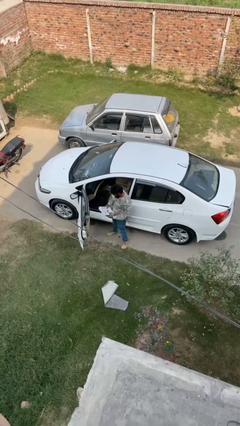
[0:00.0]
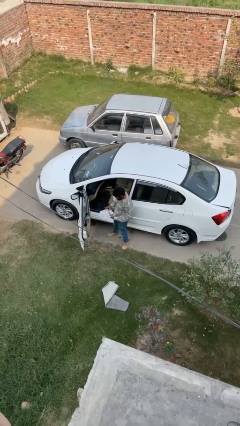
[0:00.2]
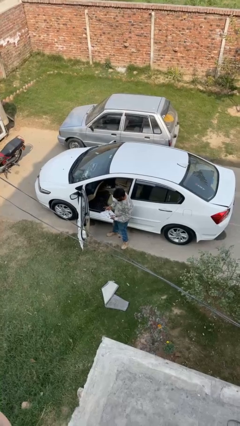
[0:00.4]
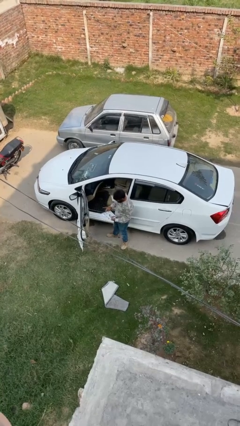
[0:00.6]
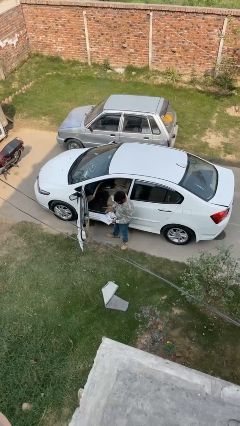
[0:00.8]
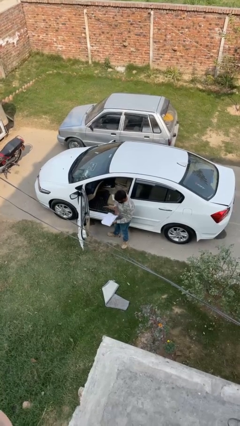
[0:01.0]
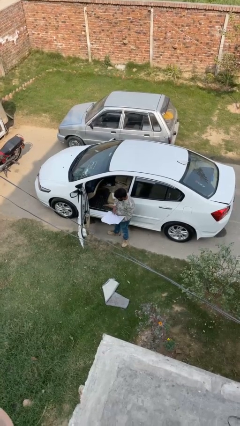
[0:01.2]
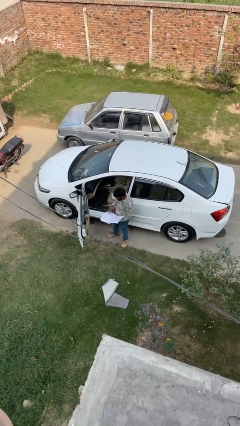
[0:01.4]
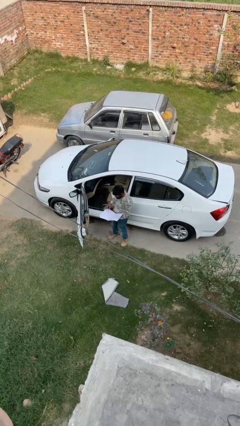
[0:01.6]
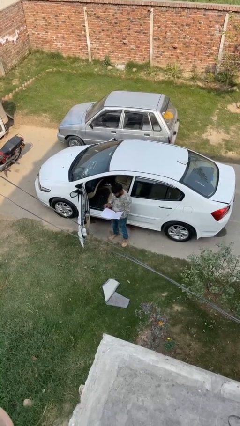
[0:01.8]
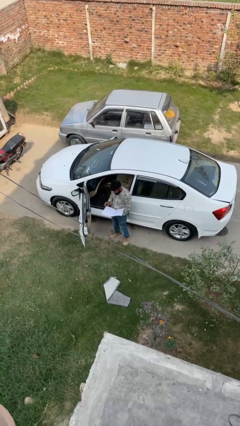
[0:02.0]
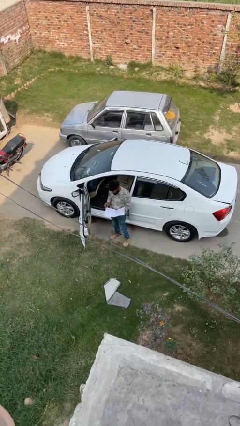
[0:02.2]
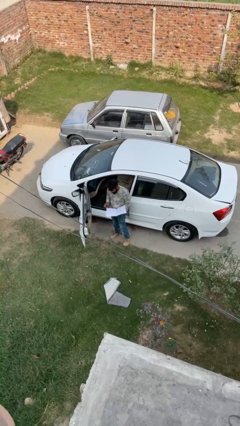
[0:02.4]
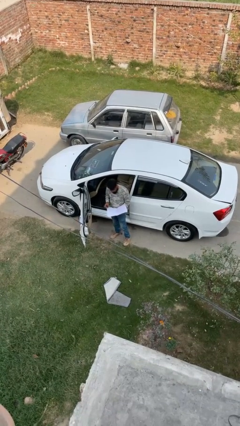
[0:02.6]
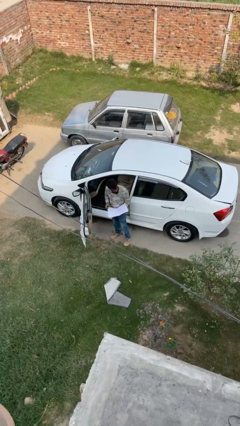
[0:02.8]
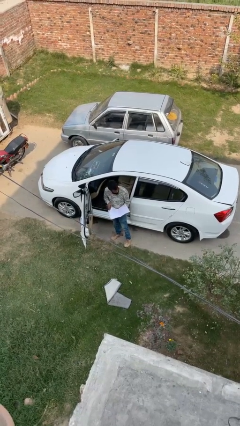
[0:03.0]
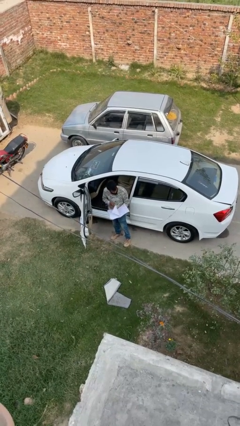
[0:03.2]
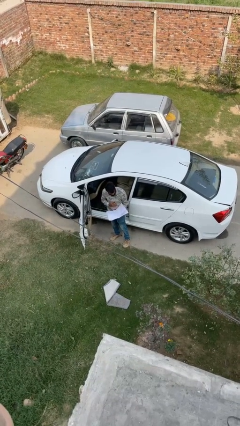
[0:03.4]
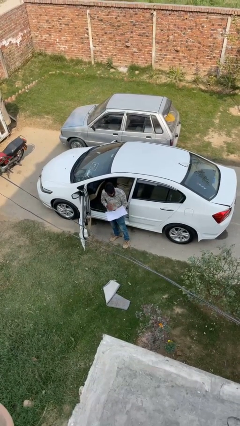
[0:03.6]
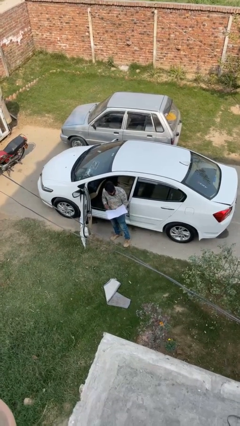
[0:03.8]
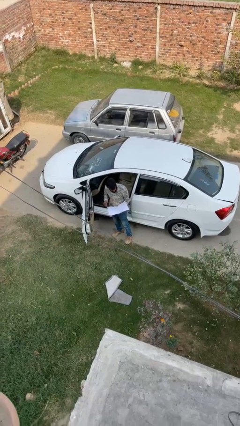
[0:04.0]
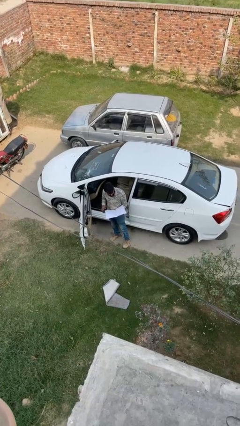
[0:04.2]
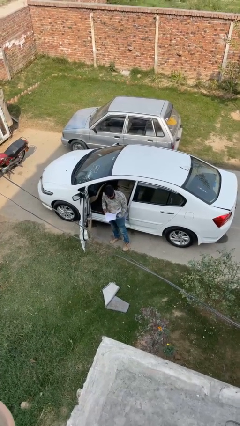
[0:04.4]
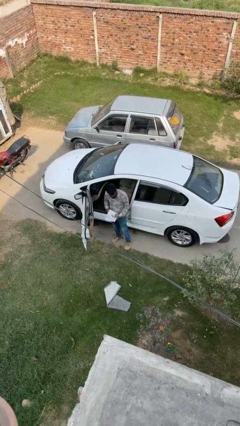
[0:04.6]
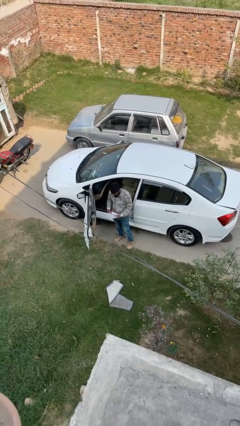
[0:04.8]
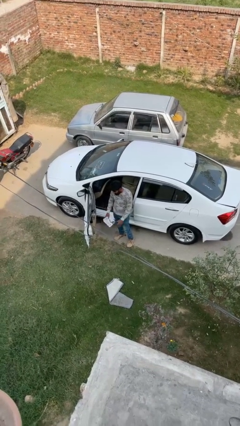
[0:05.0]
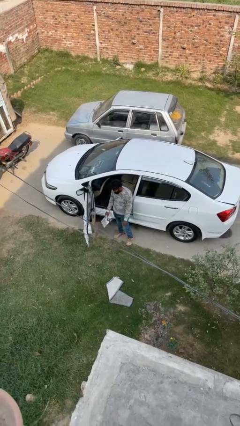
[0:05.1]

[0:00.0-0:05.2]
person reads document

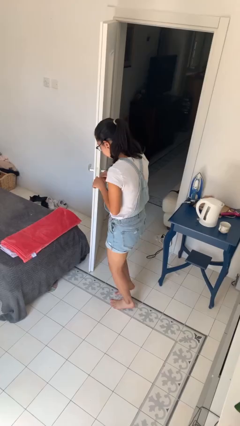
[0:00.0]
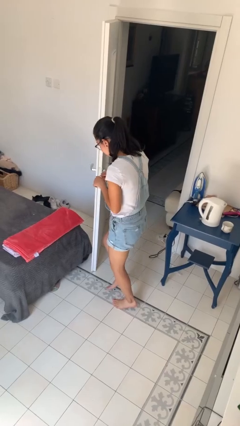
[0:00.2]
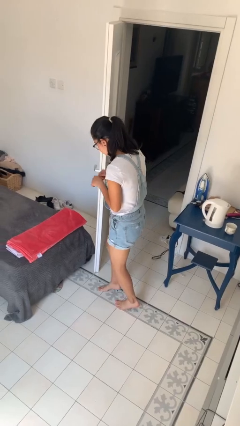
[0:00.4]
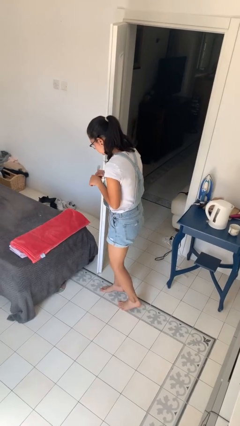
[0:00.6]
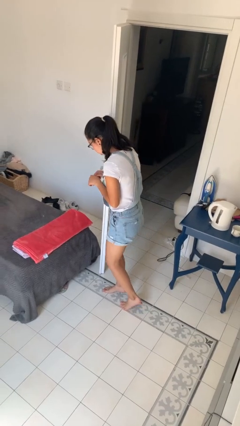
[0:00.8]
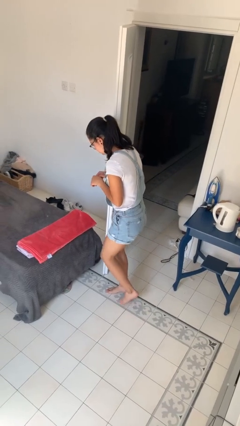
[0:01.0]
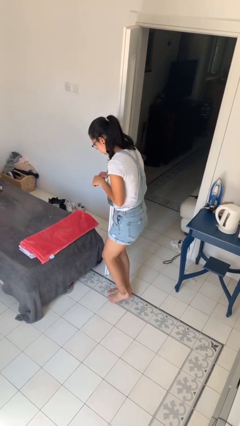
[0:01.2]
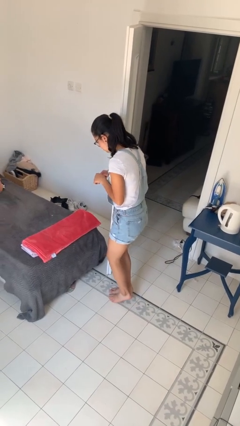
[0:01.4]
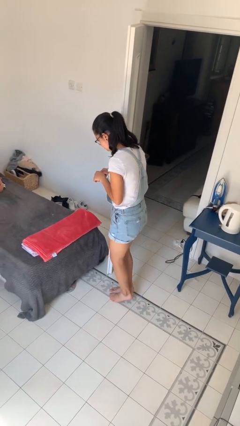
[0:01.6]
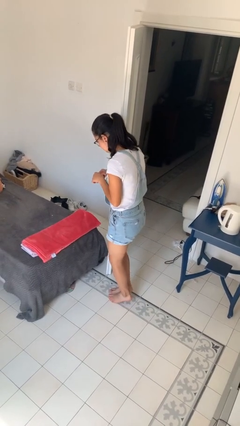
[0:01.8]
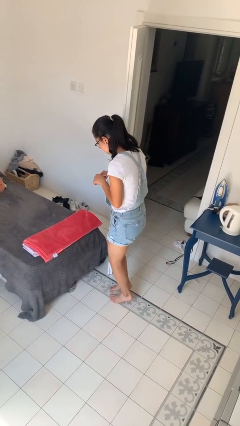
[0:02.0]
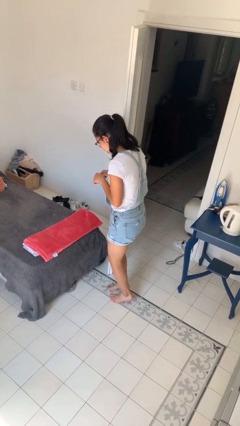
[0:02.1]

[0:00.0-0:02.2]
person walks tiptoe

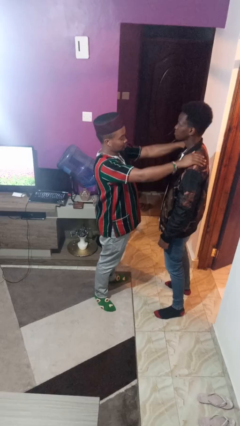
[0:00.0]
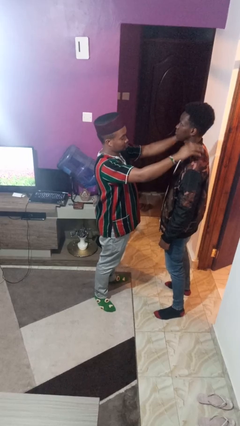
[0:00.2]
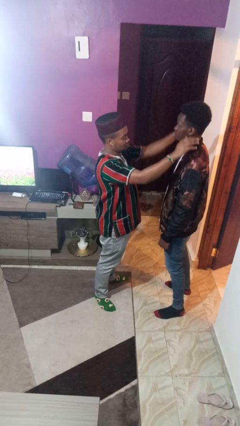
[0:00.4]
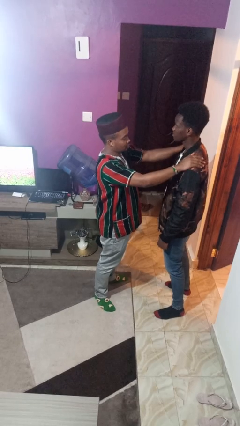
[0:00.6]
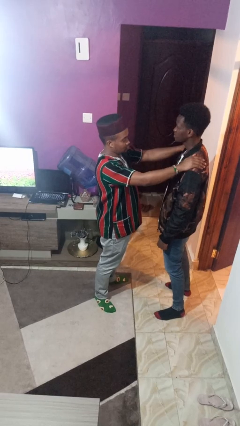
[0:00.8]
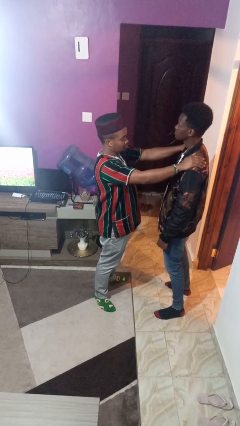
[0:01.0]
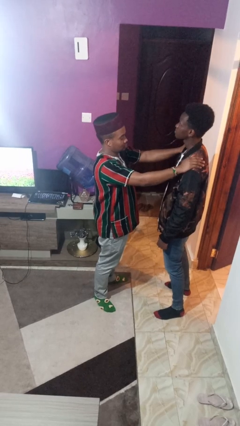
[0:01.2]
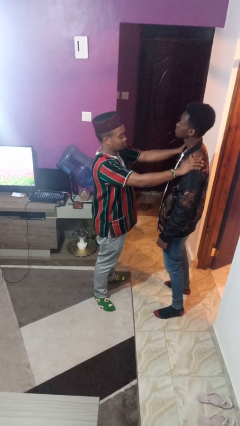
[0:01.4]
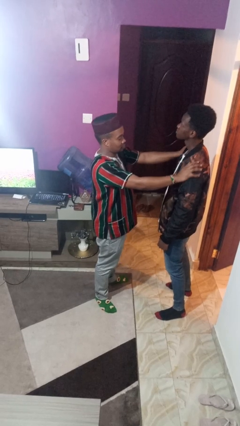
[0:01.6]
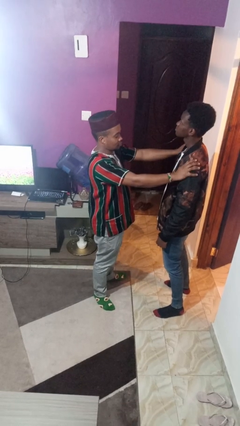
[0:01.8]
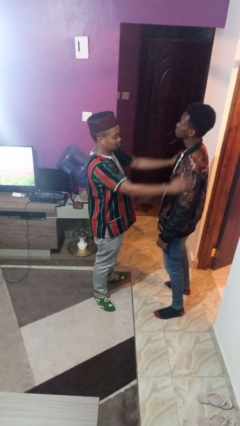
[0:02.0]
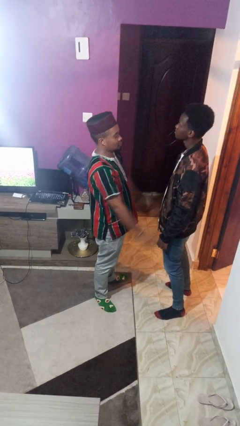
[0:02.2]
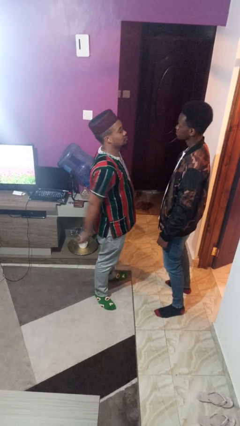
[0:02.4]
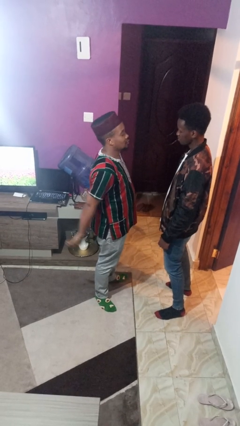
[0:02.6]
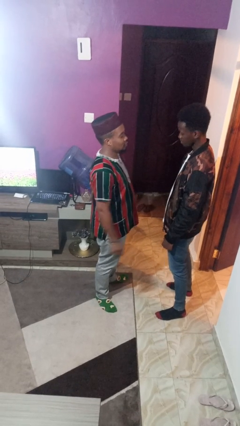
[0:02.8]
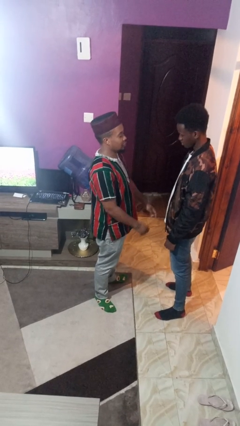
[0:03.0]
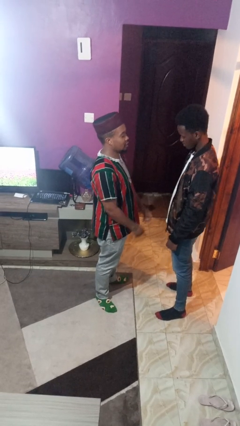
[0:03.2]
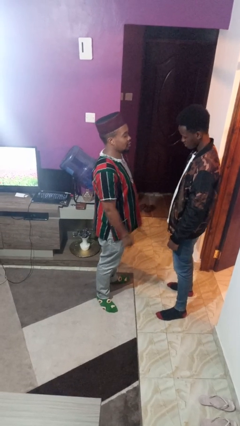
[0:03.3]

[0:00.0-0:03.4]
person opens facility door

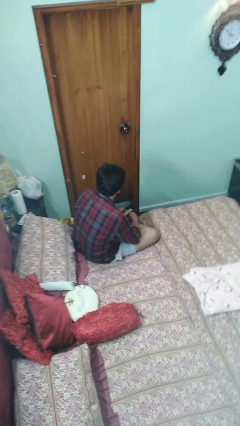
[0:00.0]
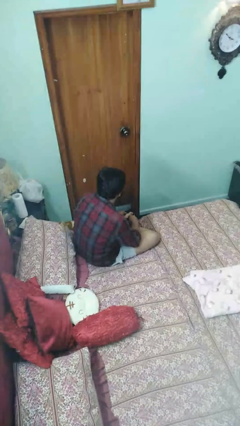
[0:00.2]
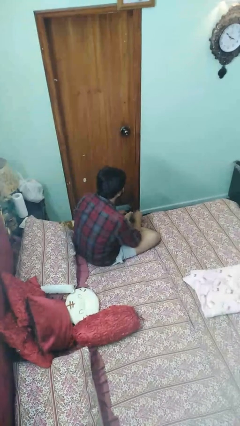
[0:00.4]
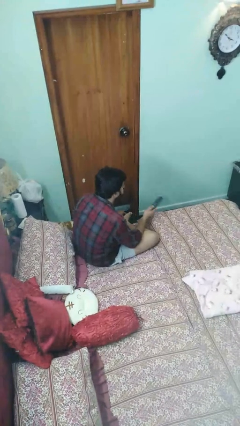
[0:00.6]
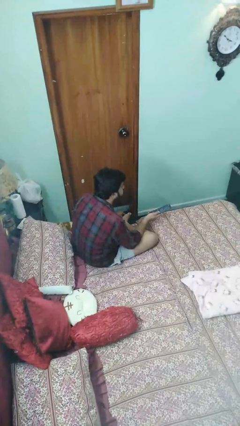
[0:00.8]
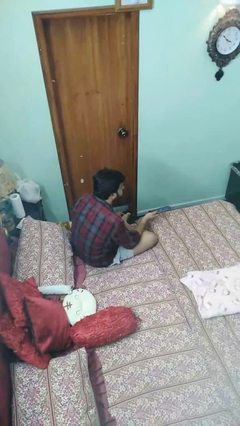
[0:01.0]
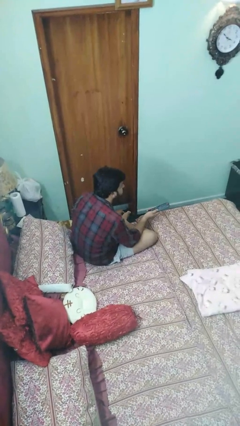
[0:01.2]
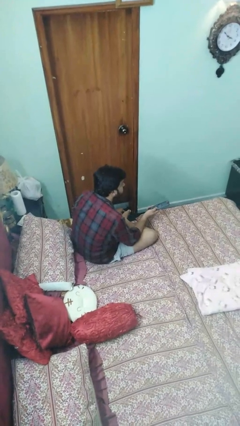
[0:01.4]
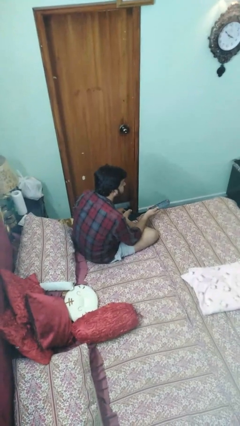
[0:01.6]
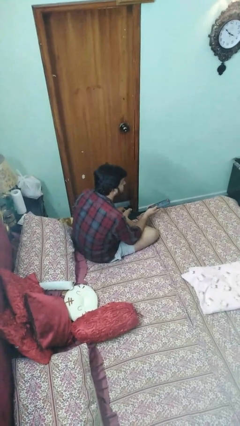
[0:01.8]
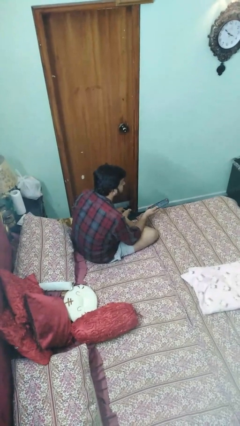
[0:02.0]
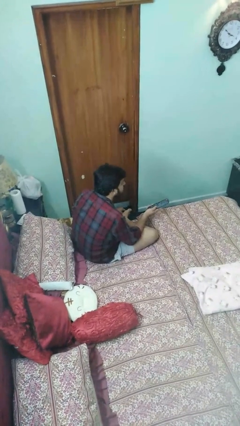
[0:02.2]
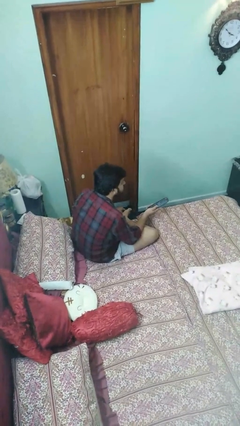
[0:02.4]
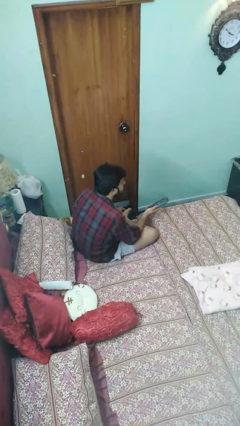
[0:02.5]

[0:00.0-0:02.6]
person uses television remote

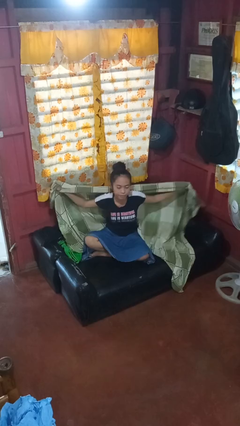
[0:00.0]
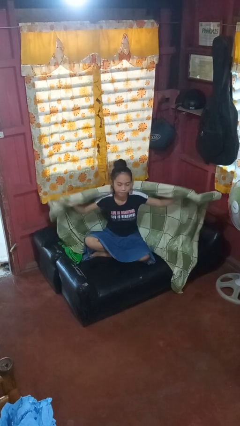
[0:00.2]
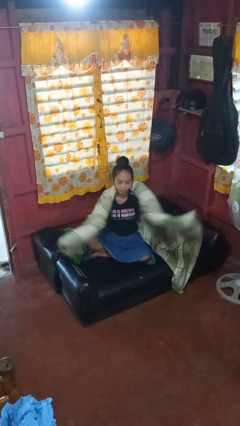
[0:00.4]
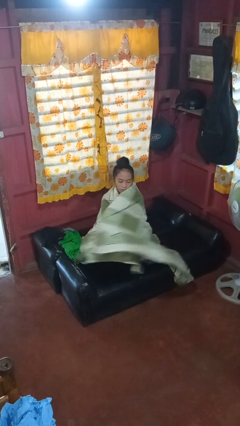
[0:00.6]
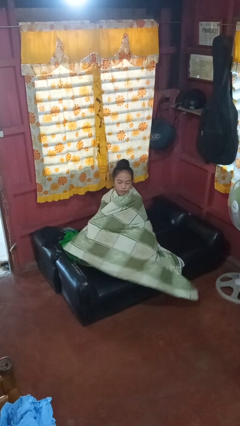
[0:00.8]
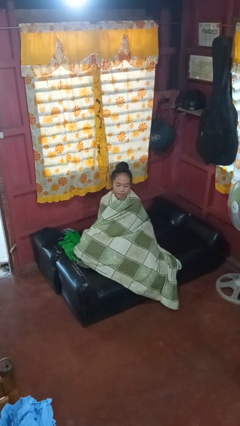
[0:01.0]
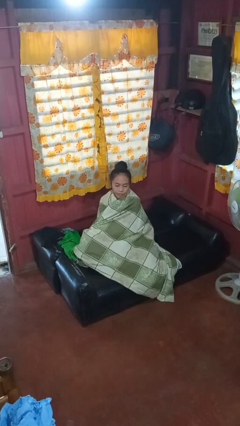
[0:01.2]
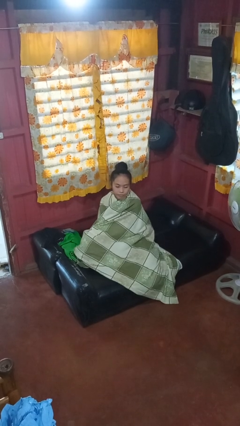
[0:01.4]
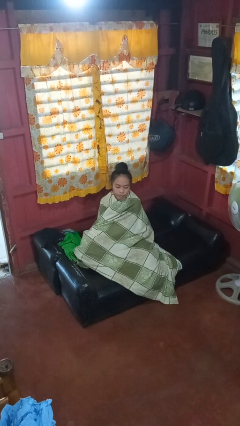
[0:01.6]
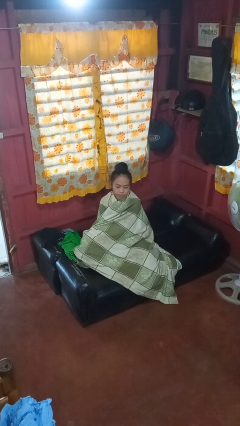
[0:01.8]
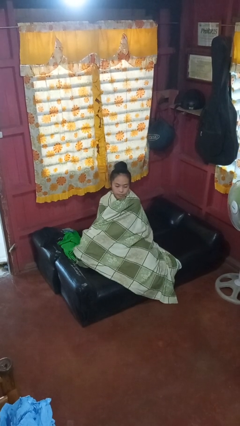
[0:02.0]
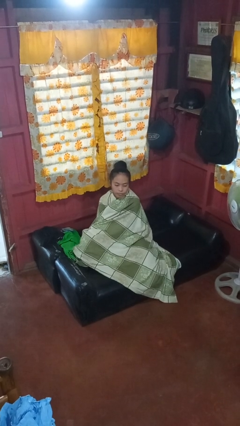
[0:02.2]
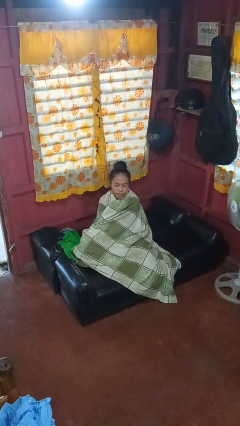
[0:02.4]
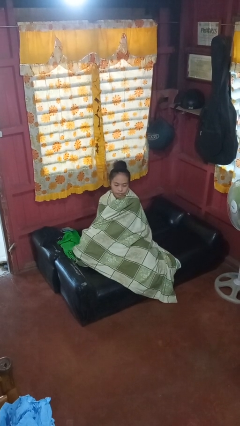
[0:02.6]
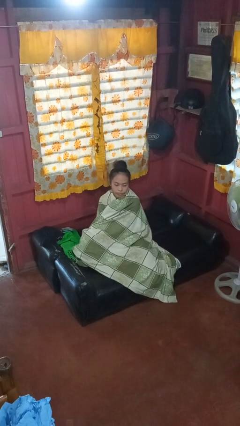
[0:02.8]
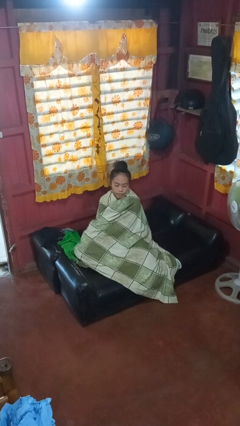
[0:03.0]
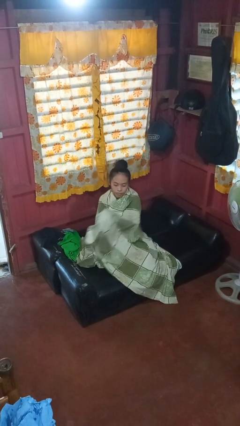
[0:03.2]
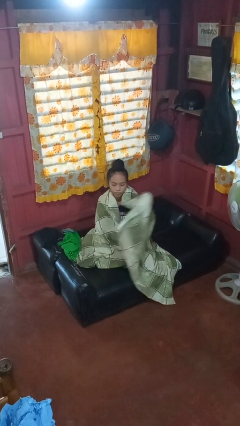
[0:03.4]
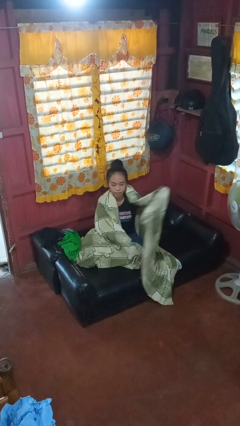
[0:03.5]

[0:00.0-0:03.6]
person covers with blanket

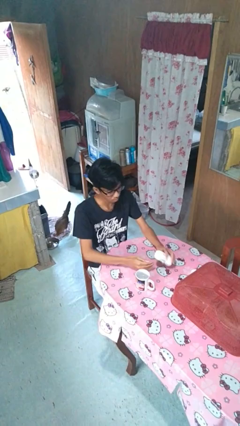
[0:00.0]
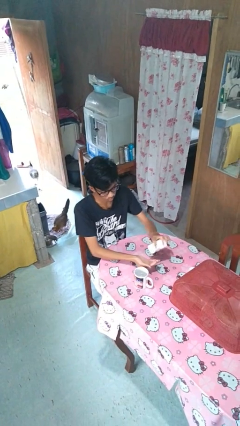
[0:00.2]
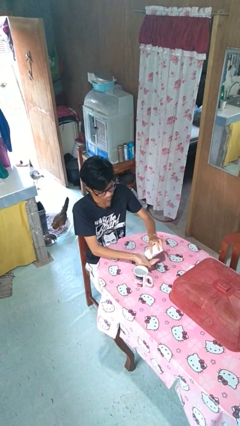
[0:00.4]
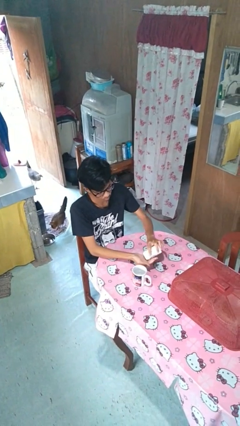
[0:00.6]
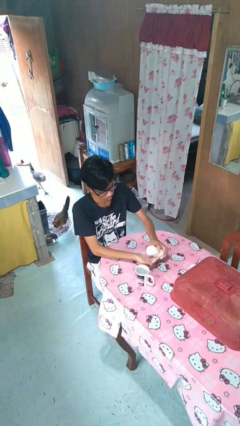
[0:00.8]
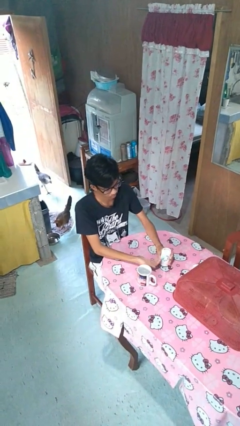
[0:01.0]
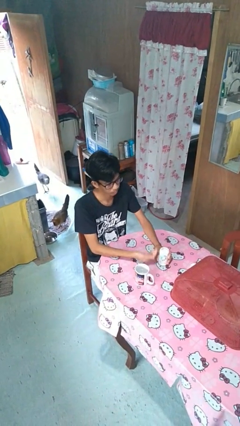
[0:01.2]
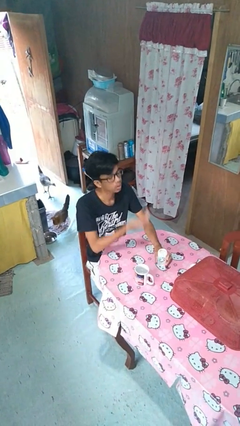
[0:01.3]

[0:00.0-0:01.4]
person takes medicine pills
